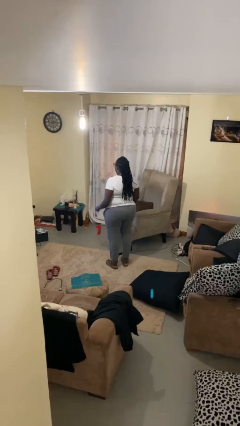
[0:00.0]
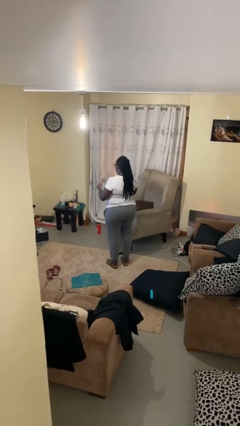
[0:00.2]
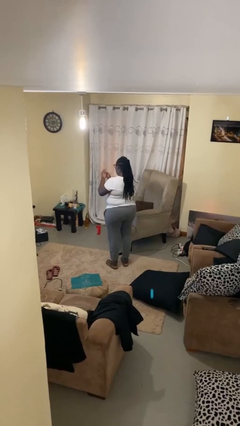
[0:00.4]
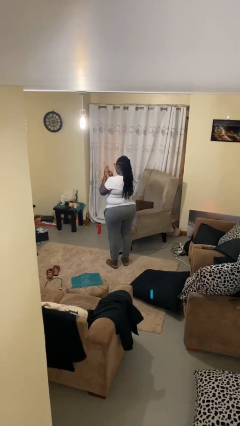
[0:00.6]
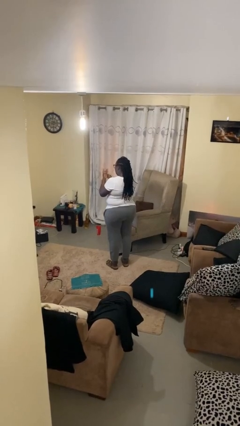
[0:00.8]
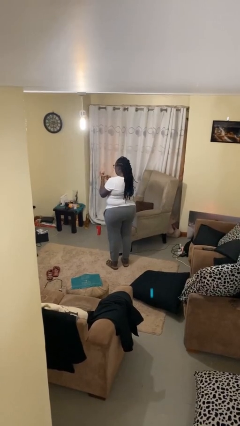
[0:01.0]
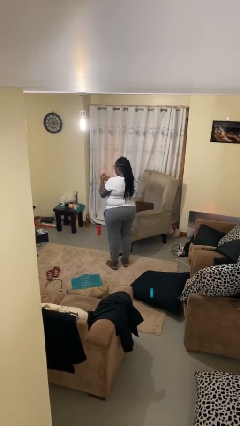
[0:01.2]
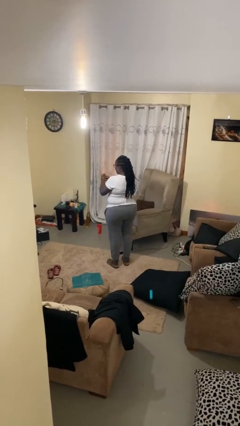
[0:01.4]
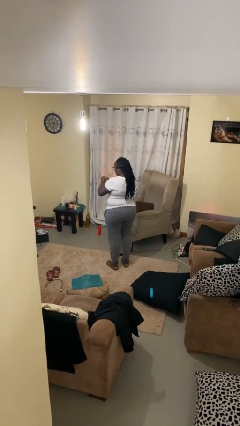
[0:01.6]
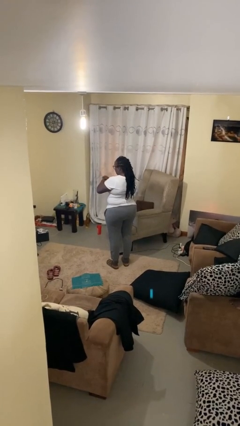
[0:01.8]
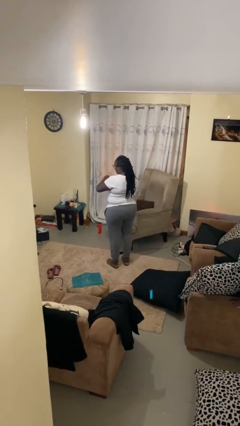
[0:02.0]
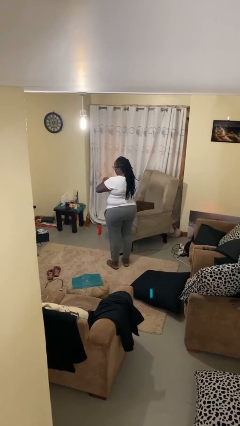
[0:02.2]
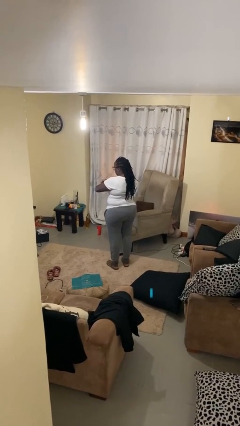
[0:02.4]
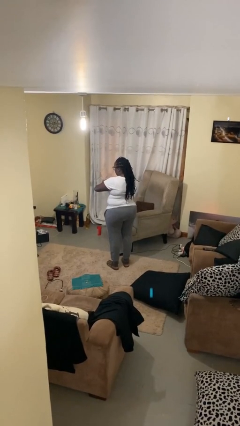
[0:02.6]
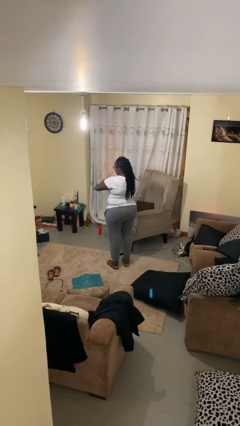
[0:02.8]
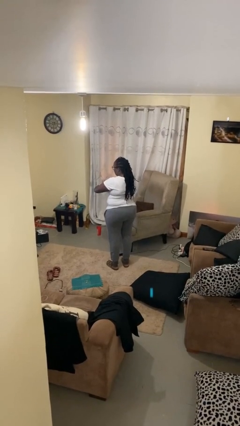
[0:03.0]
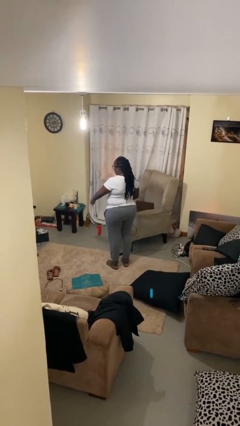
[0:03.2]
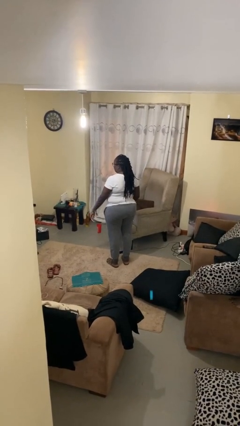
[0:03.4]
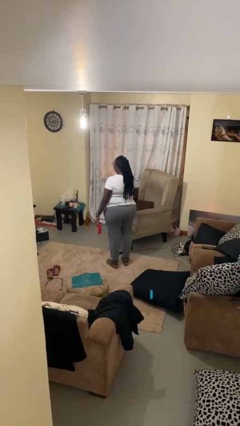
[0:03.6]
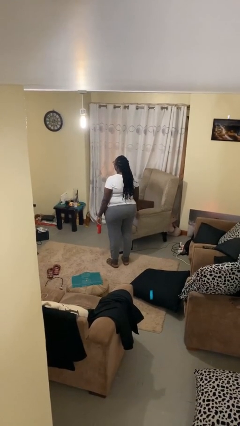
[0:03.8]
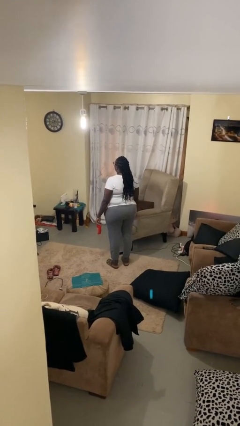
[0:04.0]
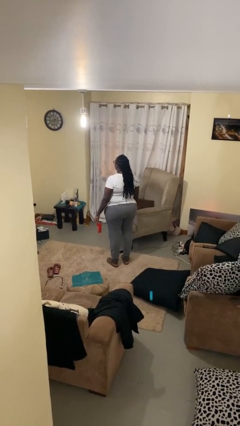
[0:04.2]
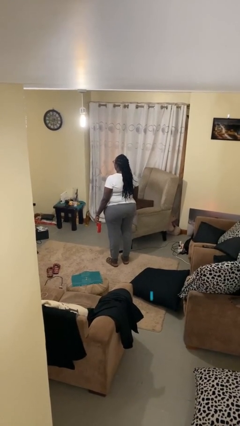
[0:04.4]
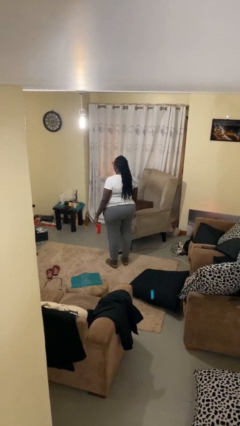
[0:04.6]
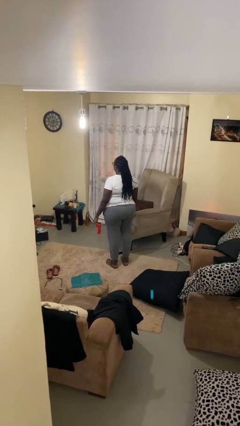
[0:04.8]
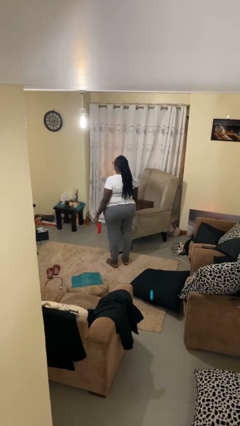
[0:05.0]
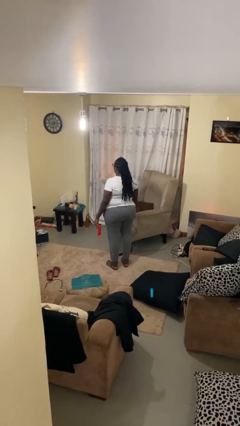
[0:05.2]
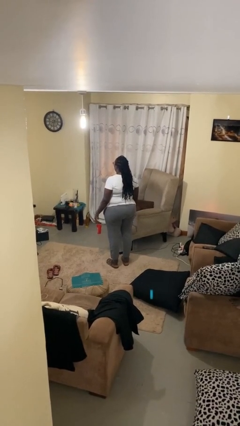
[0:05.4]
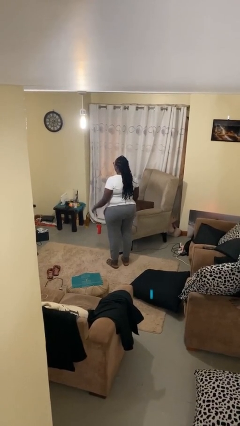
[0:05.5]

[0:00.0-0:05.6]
person puts on wristwatch

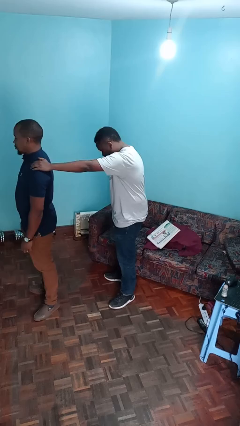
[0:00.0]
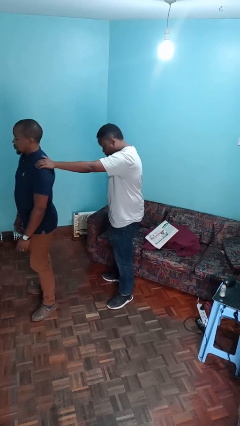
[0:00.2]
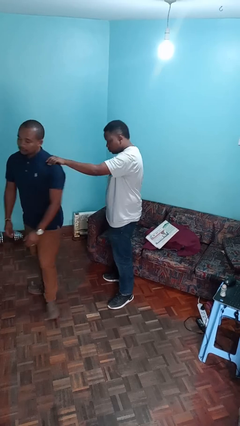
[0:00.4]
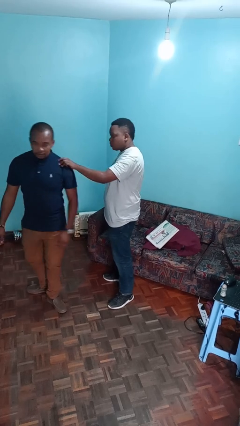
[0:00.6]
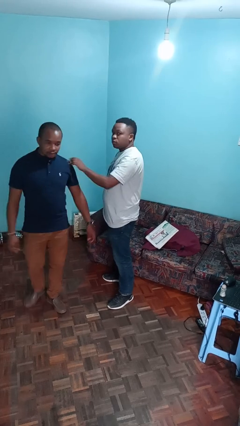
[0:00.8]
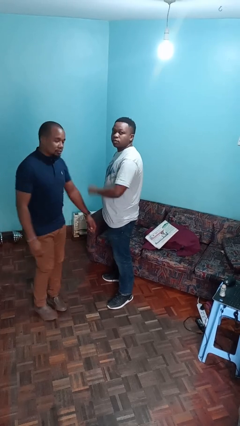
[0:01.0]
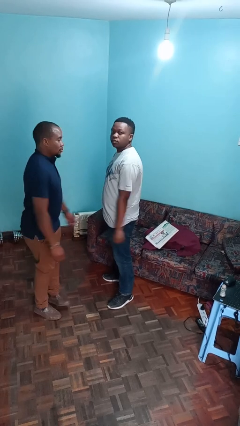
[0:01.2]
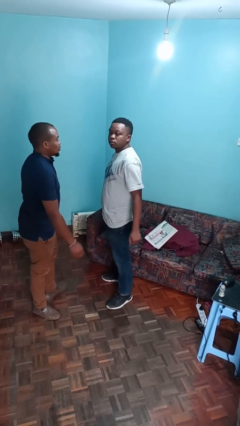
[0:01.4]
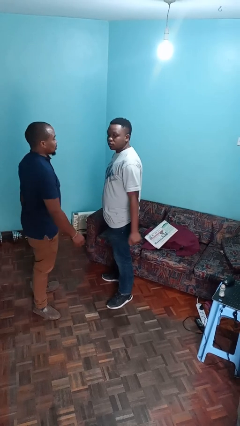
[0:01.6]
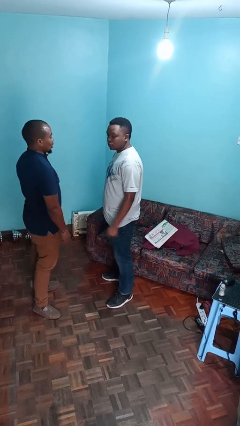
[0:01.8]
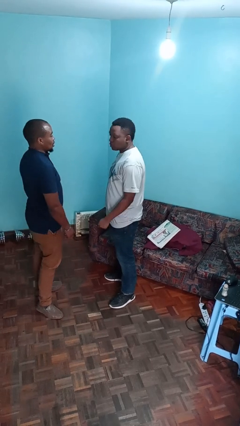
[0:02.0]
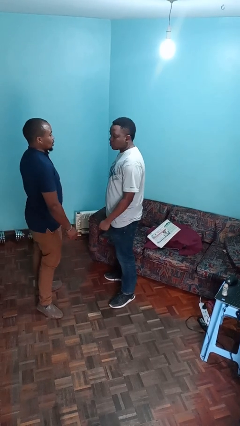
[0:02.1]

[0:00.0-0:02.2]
person spins person around

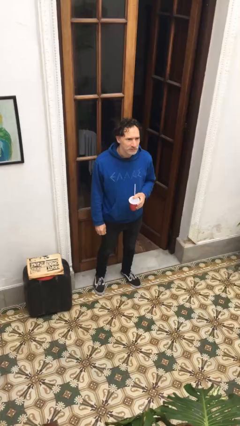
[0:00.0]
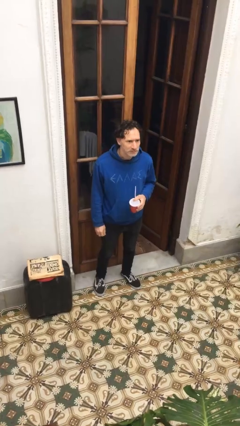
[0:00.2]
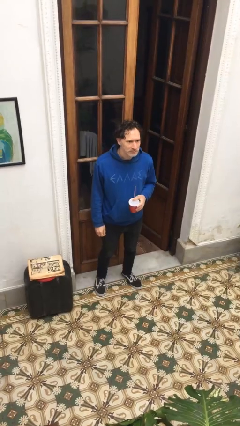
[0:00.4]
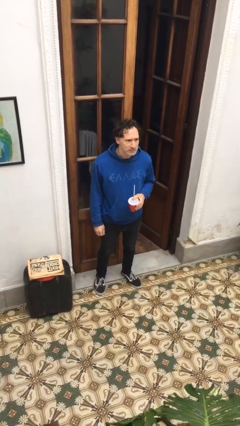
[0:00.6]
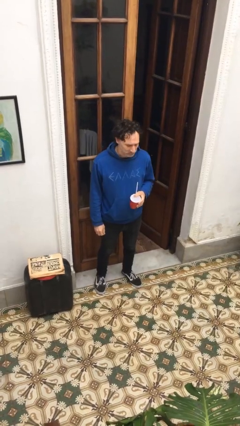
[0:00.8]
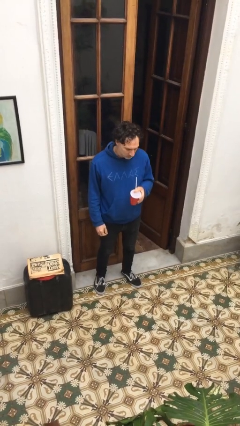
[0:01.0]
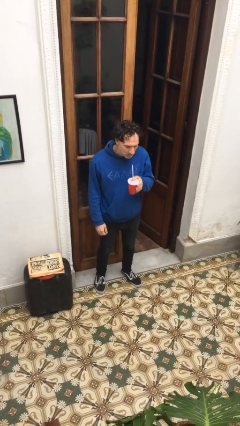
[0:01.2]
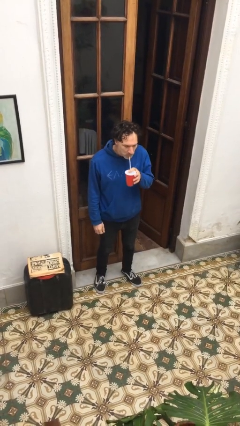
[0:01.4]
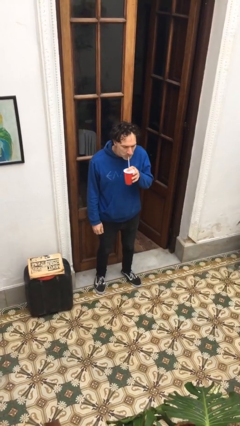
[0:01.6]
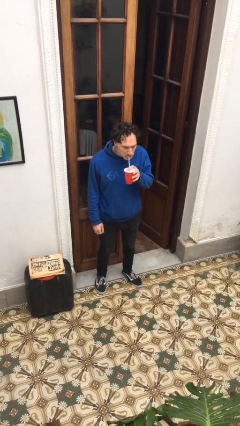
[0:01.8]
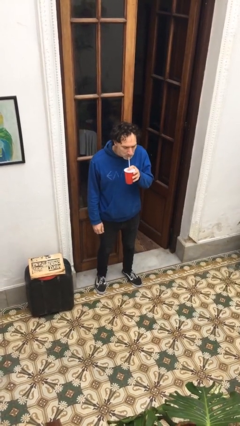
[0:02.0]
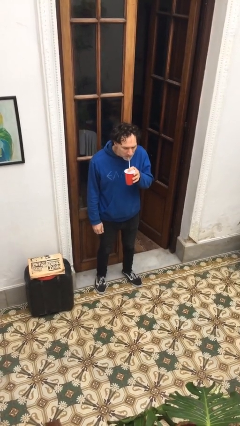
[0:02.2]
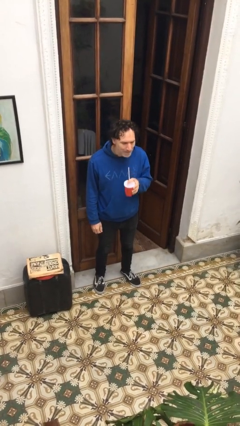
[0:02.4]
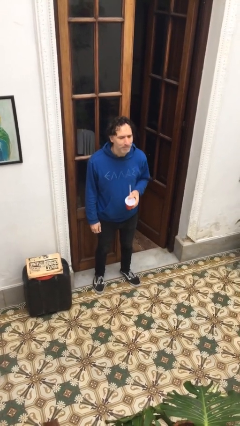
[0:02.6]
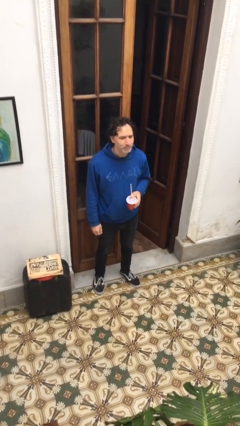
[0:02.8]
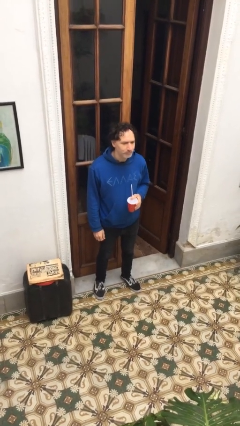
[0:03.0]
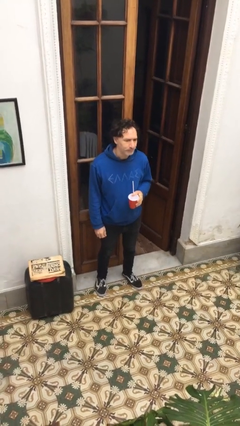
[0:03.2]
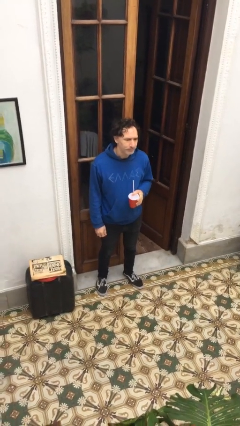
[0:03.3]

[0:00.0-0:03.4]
person drinks from straw

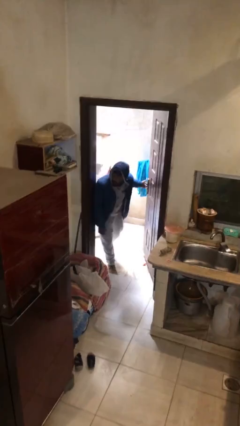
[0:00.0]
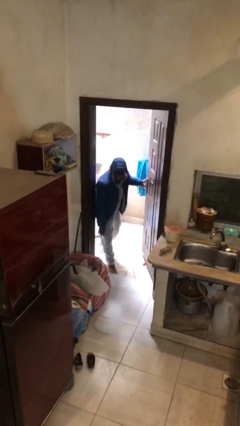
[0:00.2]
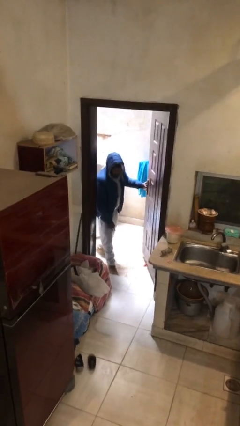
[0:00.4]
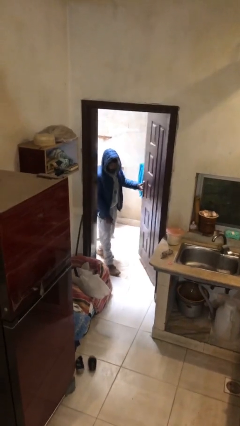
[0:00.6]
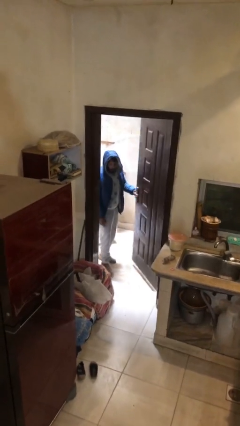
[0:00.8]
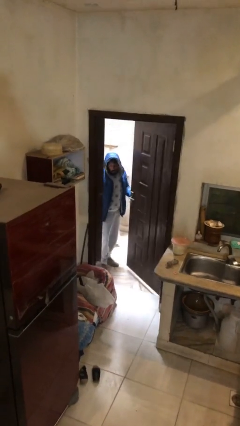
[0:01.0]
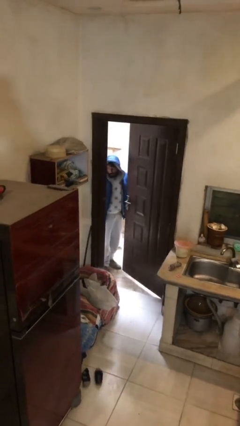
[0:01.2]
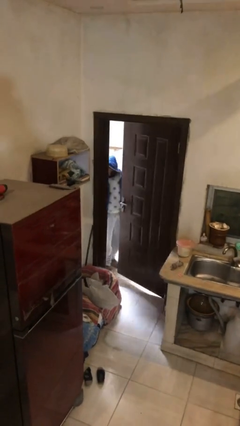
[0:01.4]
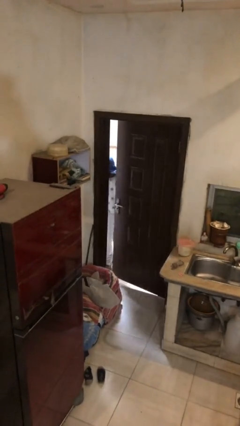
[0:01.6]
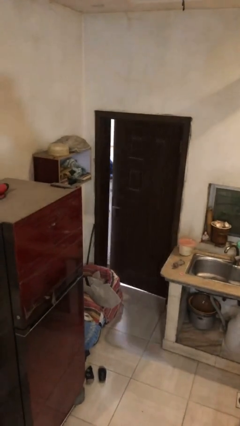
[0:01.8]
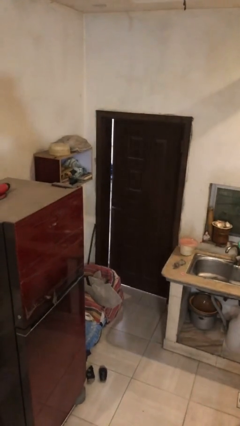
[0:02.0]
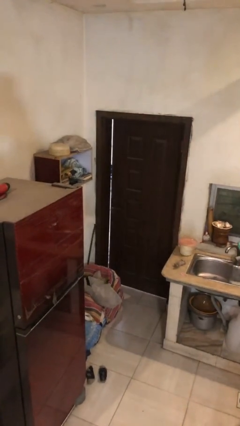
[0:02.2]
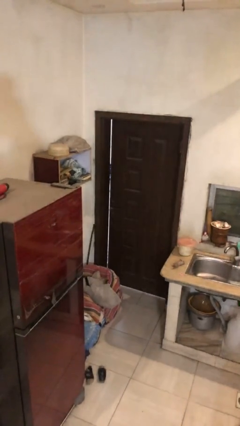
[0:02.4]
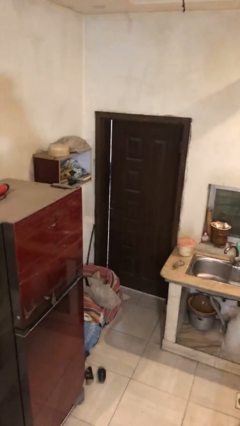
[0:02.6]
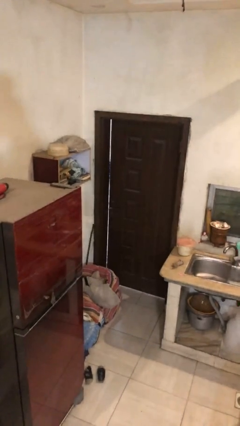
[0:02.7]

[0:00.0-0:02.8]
person closes facility door

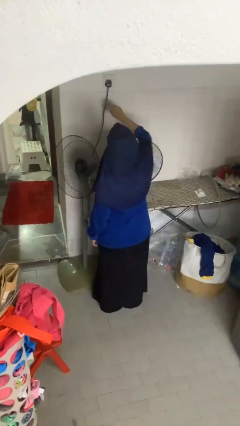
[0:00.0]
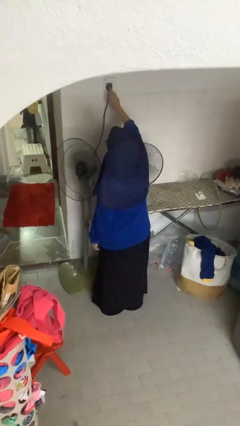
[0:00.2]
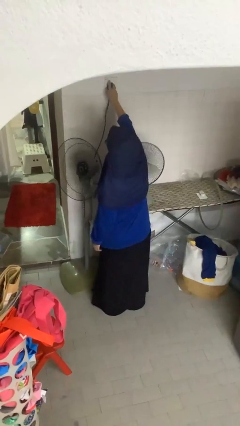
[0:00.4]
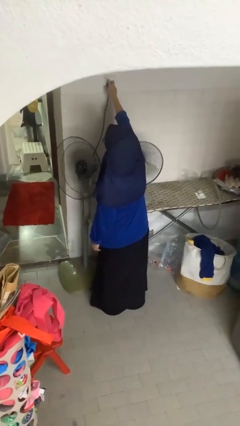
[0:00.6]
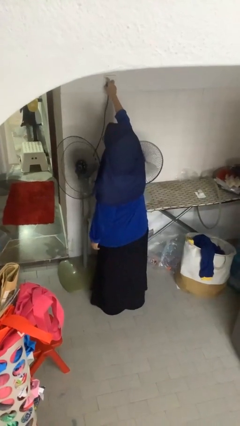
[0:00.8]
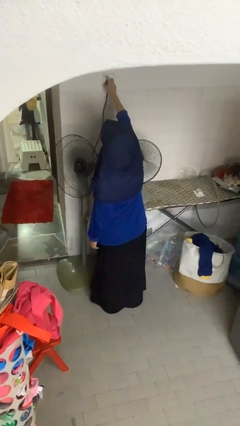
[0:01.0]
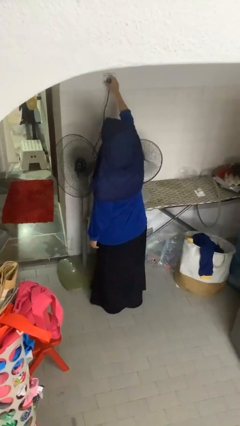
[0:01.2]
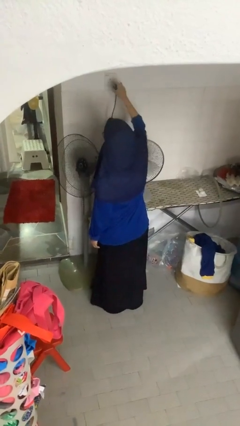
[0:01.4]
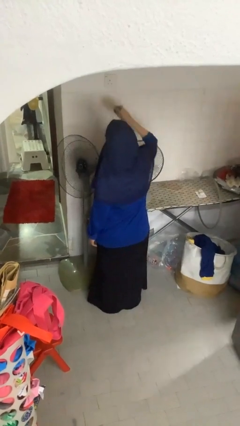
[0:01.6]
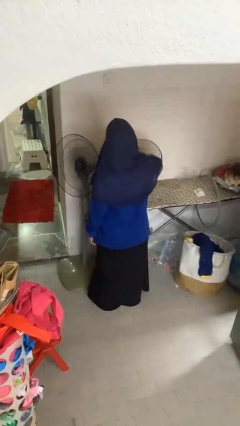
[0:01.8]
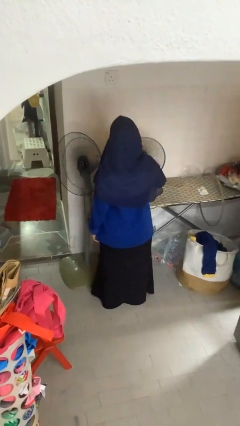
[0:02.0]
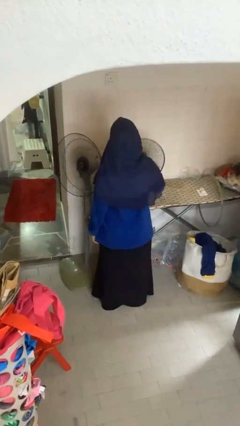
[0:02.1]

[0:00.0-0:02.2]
person unplugs from electrical socket

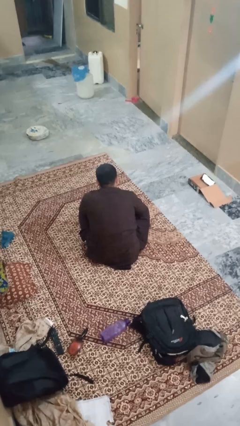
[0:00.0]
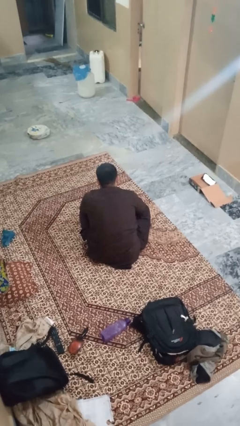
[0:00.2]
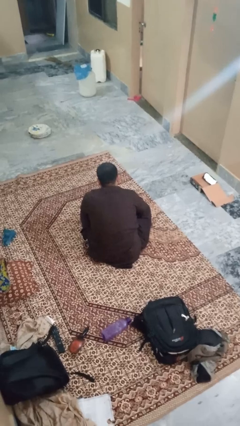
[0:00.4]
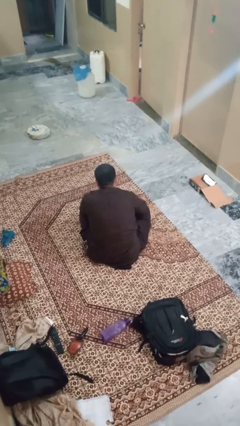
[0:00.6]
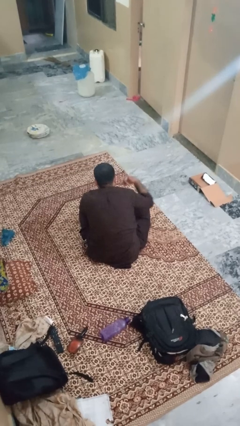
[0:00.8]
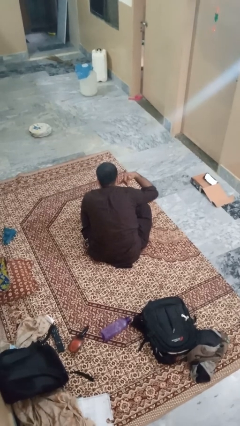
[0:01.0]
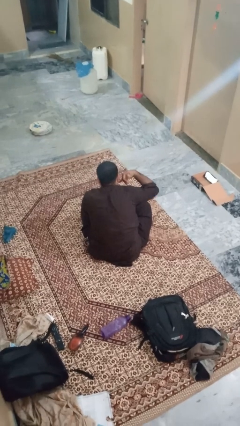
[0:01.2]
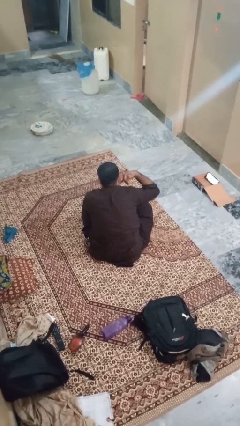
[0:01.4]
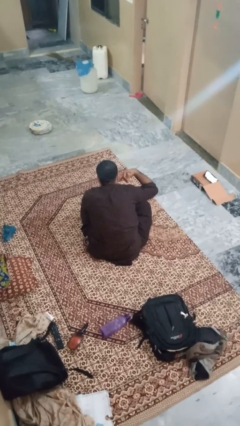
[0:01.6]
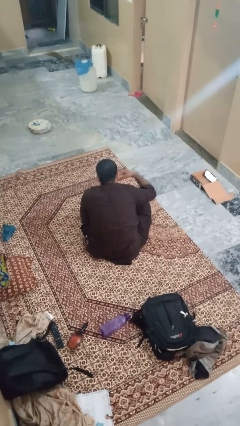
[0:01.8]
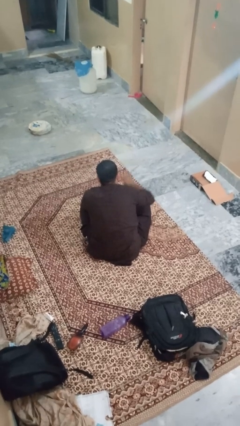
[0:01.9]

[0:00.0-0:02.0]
person gestures call me
